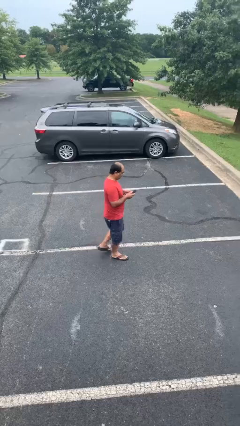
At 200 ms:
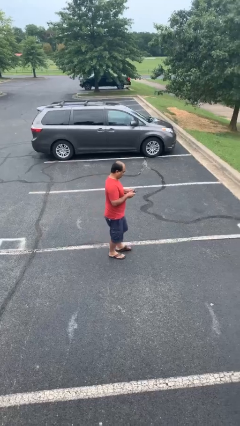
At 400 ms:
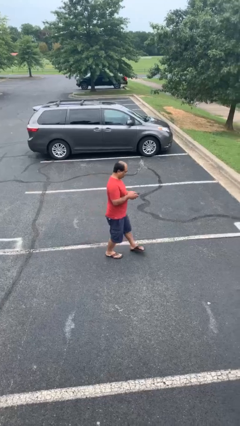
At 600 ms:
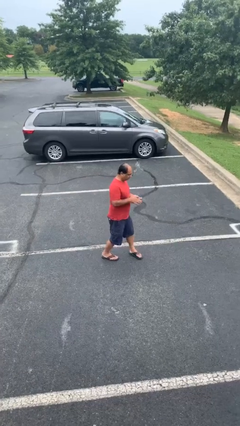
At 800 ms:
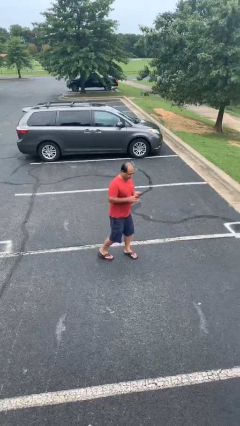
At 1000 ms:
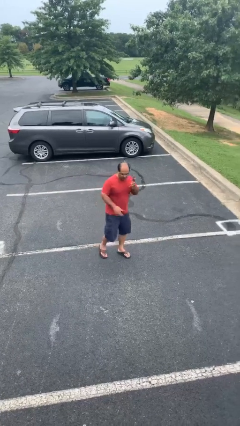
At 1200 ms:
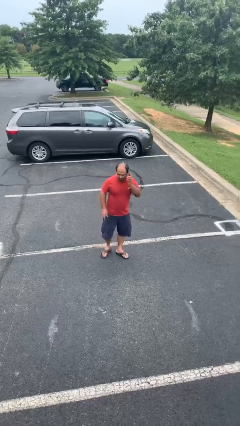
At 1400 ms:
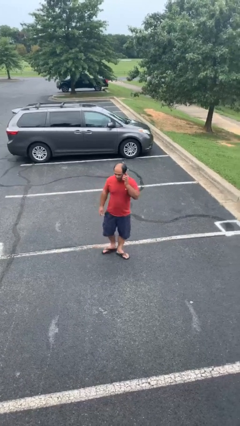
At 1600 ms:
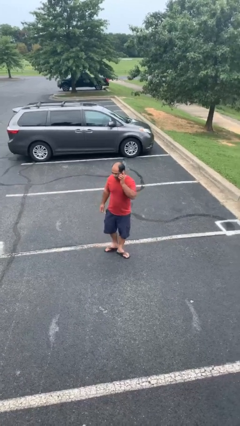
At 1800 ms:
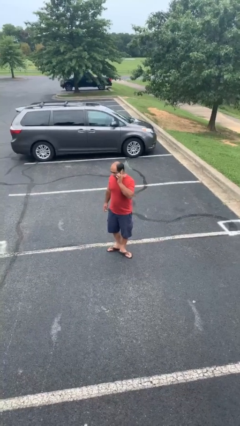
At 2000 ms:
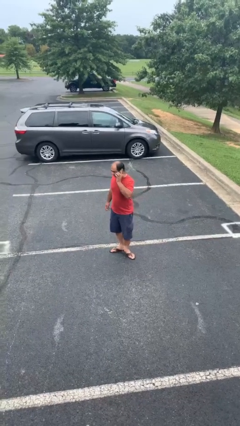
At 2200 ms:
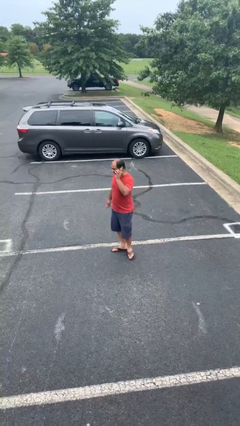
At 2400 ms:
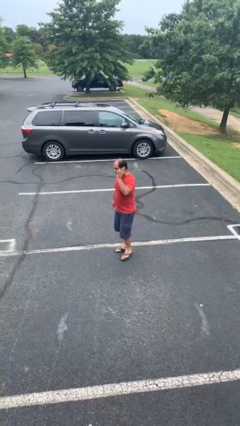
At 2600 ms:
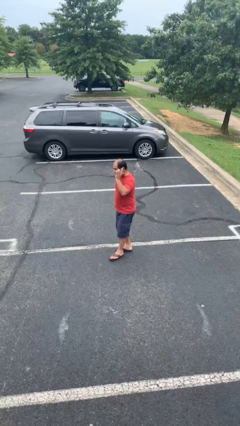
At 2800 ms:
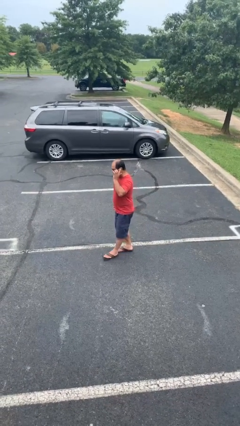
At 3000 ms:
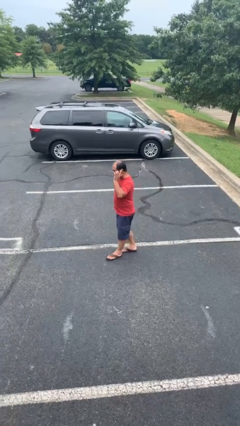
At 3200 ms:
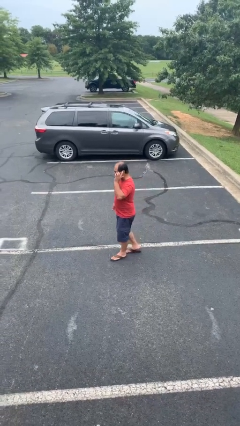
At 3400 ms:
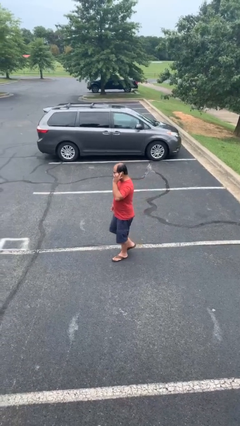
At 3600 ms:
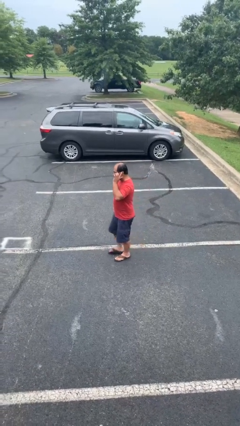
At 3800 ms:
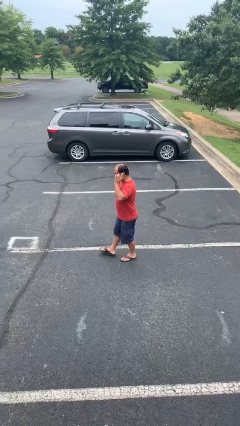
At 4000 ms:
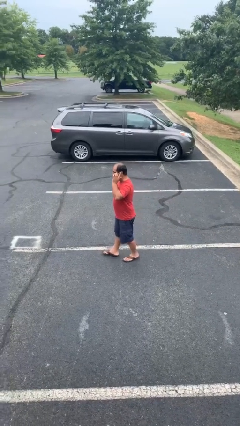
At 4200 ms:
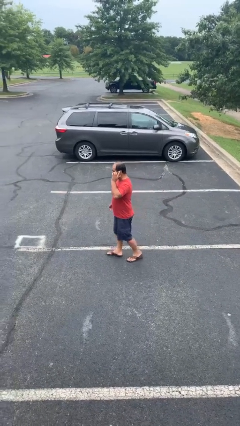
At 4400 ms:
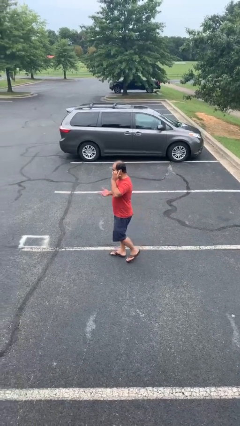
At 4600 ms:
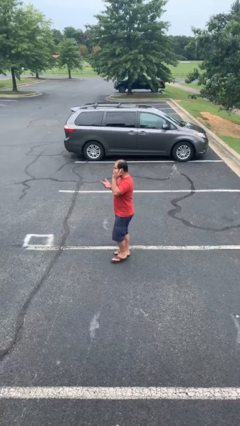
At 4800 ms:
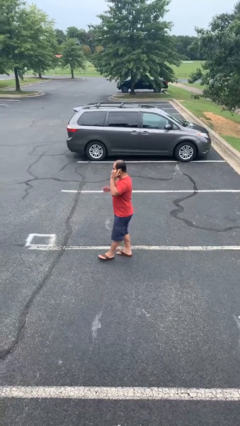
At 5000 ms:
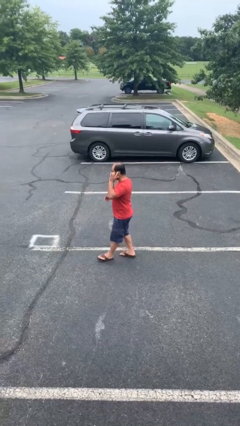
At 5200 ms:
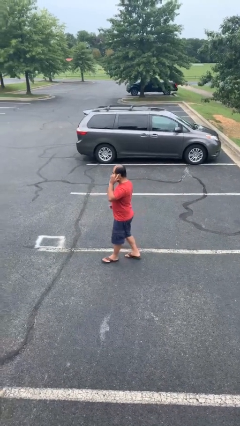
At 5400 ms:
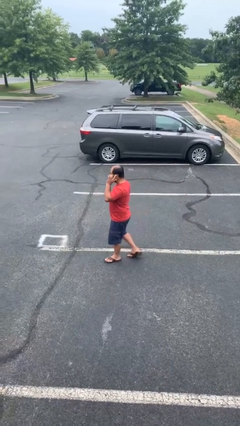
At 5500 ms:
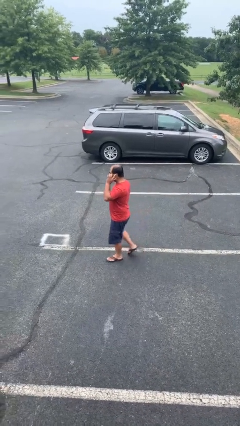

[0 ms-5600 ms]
person talks on phone

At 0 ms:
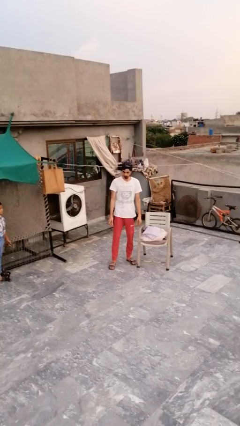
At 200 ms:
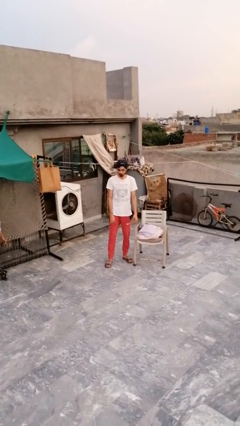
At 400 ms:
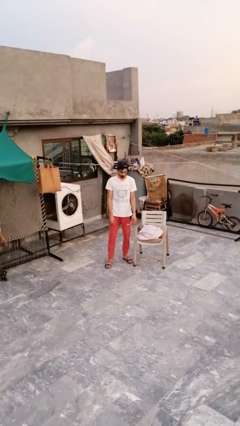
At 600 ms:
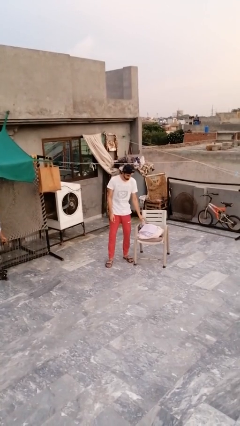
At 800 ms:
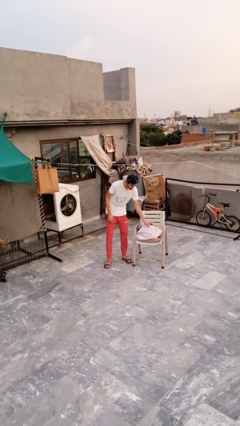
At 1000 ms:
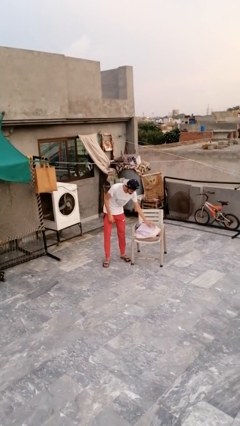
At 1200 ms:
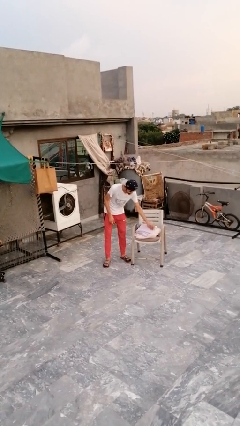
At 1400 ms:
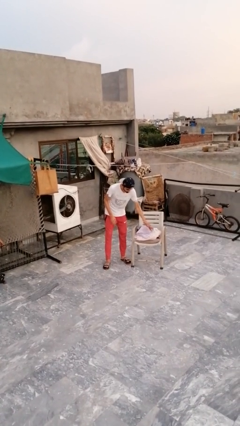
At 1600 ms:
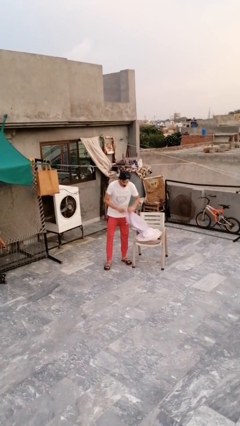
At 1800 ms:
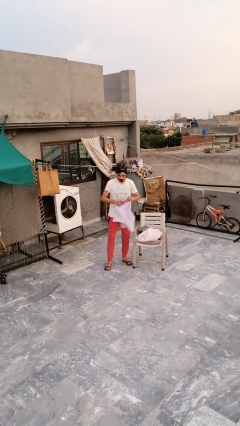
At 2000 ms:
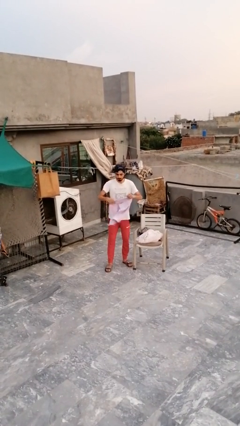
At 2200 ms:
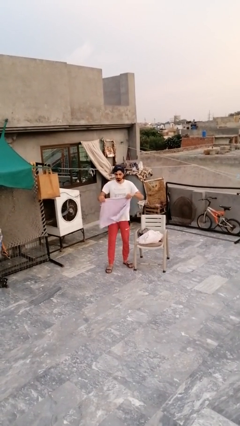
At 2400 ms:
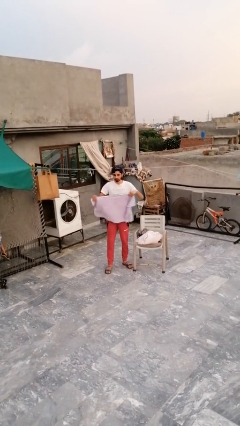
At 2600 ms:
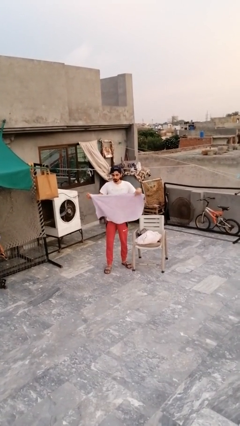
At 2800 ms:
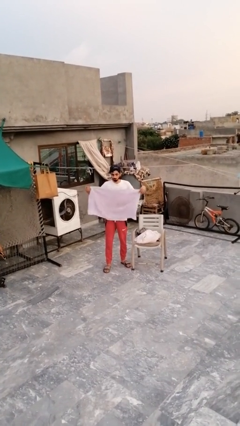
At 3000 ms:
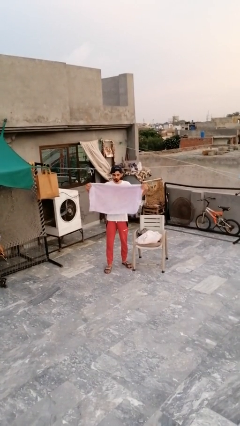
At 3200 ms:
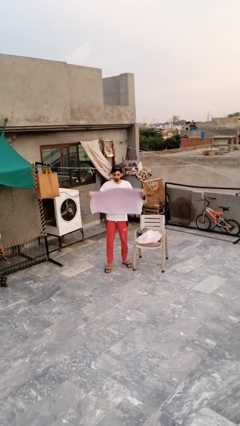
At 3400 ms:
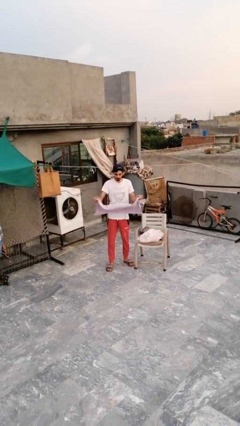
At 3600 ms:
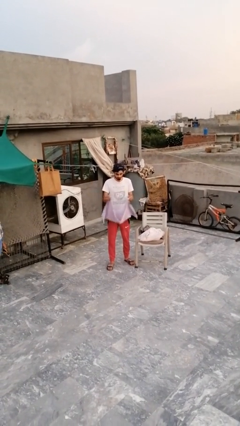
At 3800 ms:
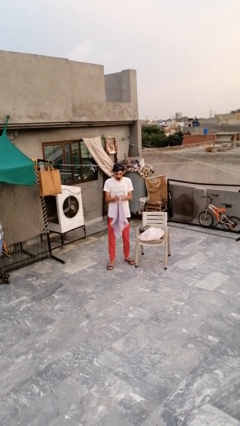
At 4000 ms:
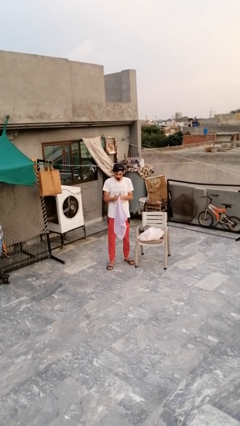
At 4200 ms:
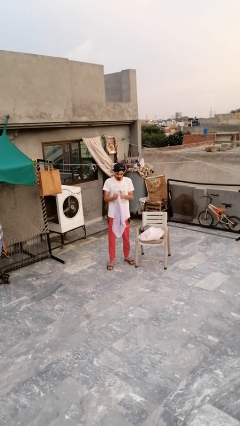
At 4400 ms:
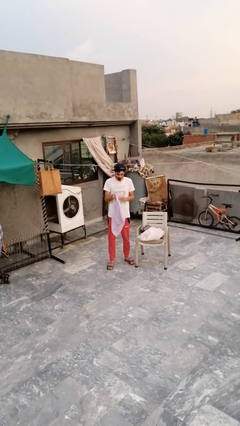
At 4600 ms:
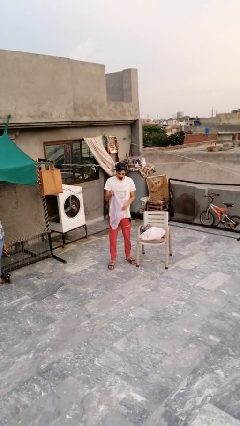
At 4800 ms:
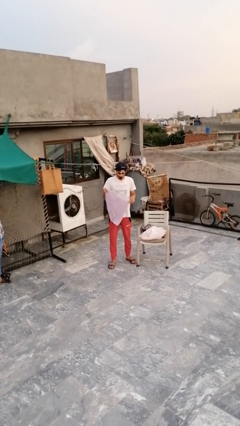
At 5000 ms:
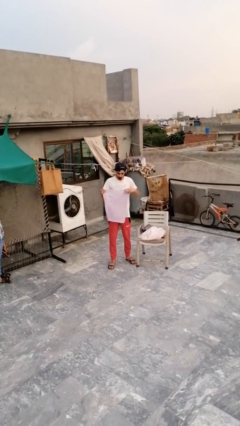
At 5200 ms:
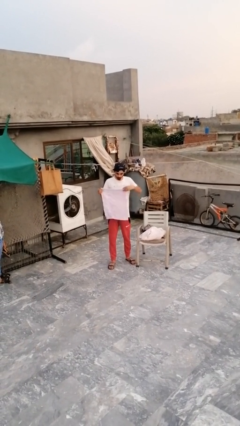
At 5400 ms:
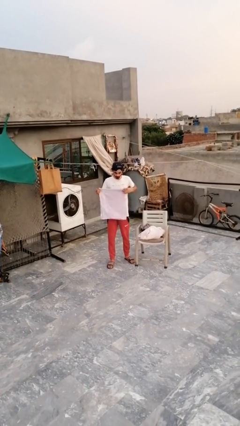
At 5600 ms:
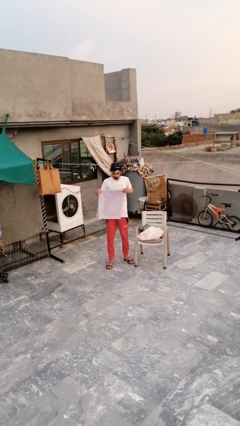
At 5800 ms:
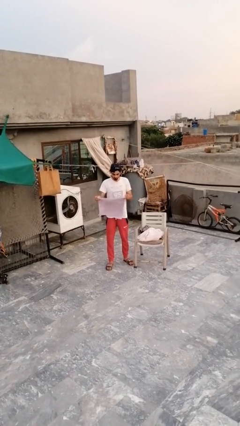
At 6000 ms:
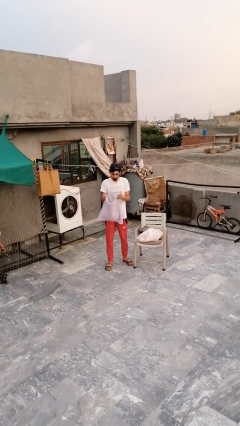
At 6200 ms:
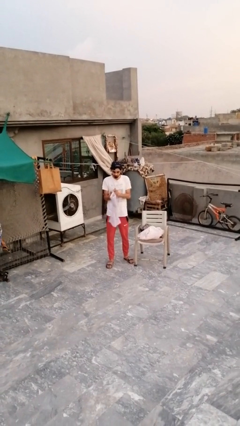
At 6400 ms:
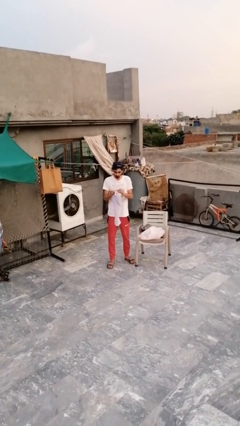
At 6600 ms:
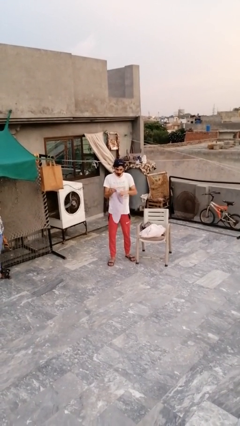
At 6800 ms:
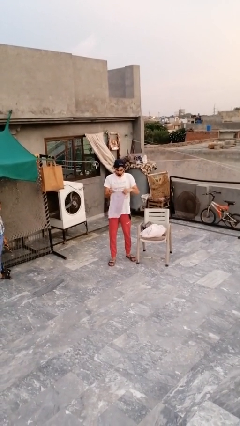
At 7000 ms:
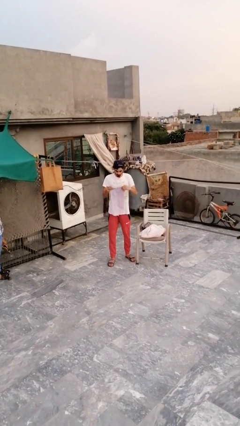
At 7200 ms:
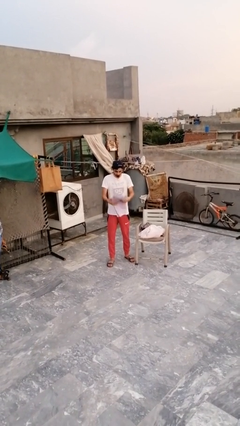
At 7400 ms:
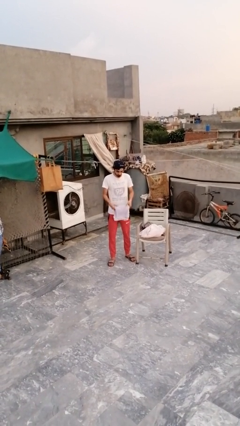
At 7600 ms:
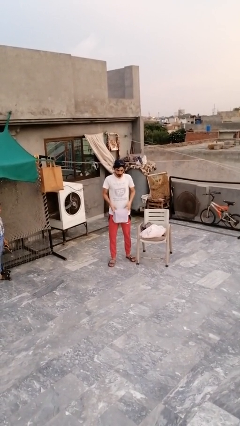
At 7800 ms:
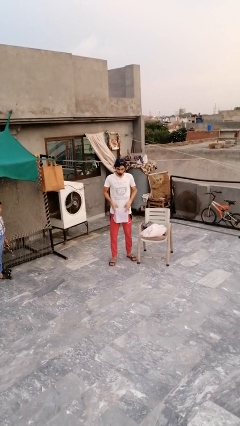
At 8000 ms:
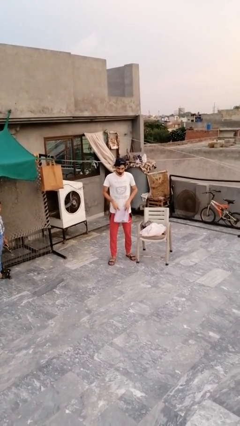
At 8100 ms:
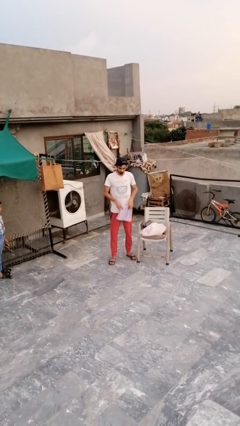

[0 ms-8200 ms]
person folds towel

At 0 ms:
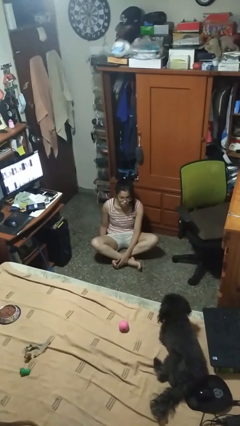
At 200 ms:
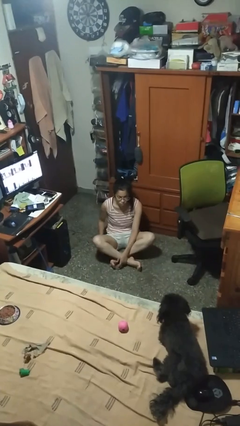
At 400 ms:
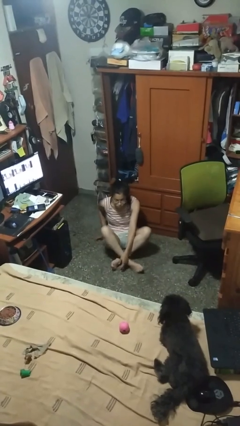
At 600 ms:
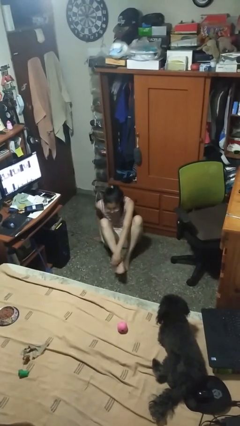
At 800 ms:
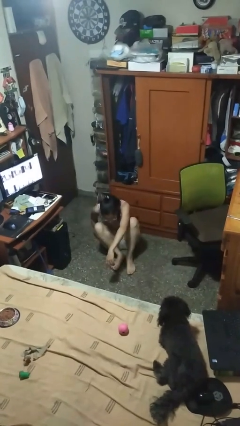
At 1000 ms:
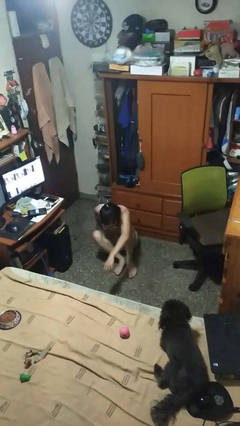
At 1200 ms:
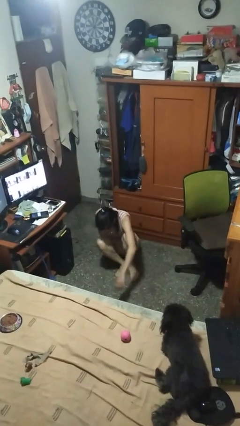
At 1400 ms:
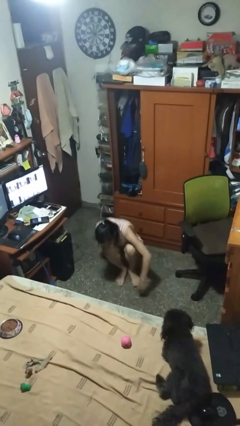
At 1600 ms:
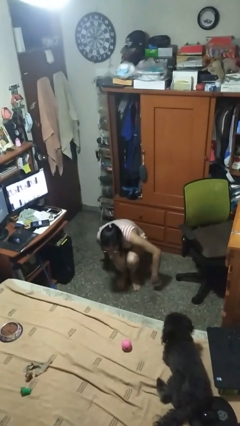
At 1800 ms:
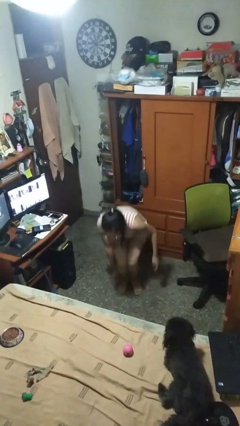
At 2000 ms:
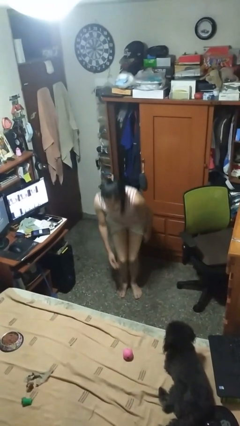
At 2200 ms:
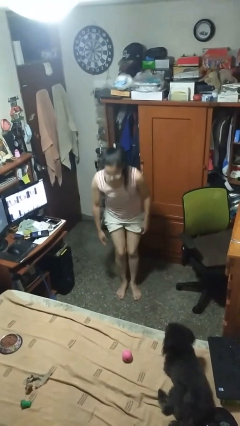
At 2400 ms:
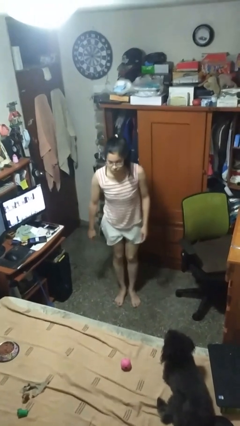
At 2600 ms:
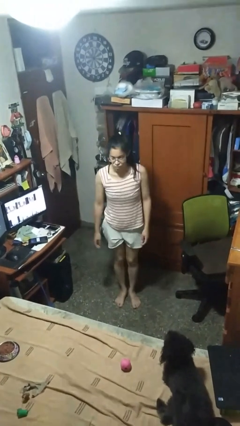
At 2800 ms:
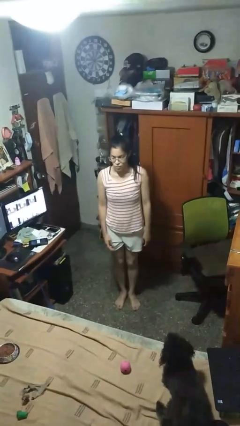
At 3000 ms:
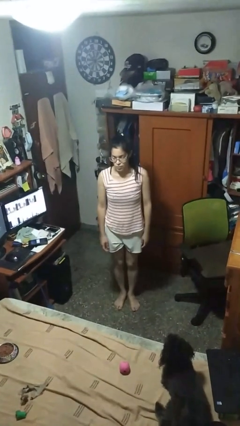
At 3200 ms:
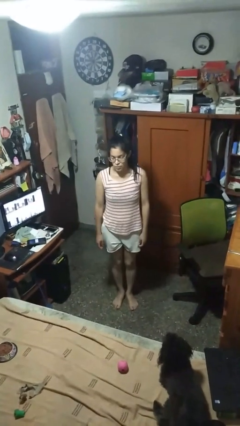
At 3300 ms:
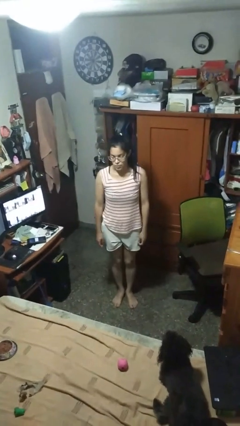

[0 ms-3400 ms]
person stands up from floor

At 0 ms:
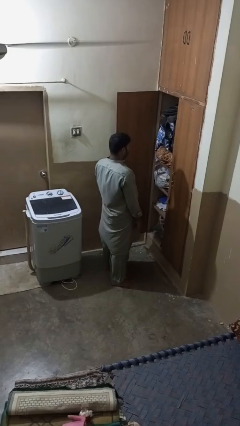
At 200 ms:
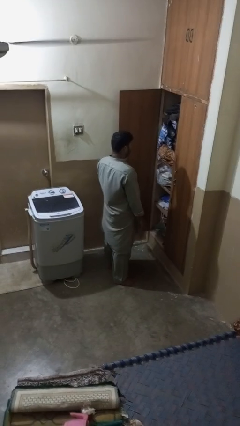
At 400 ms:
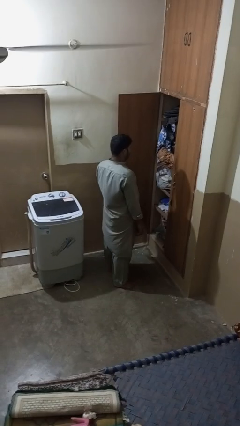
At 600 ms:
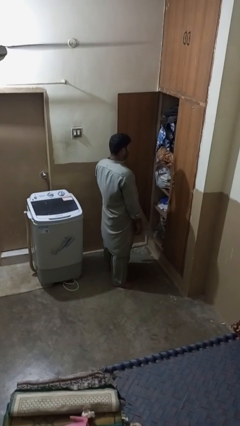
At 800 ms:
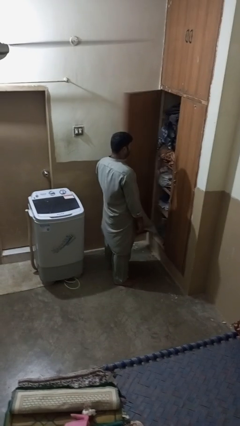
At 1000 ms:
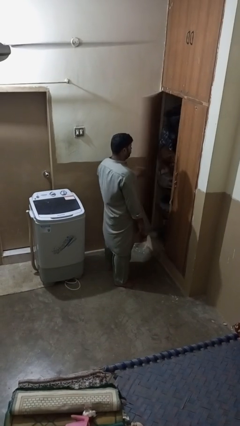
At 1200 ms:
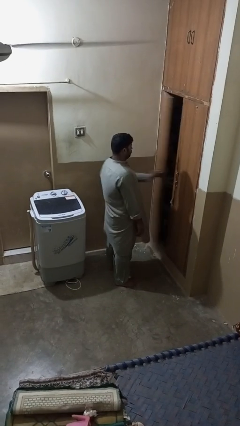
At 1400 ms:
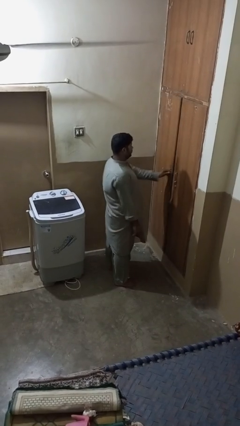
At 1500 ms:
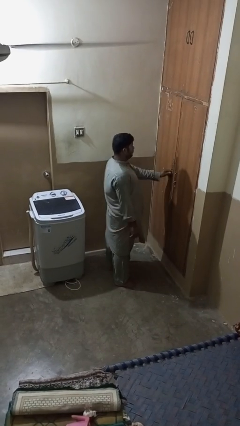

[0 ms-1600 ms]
person closes closet door
